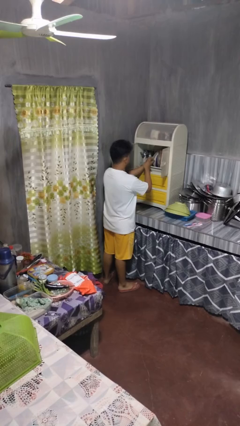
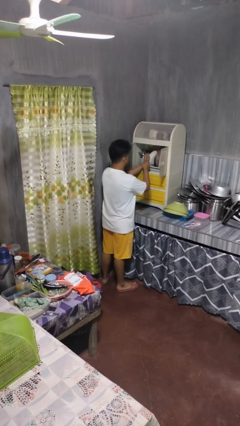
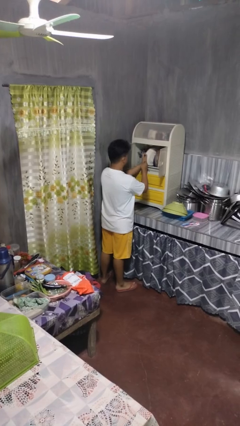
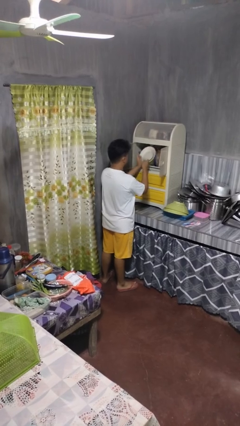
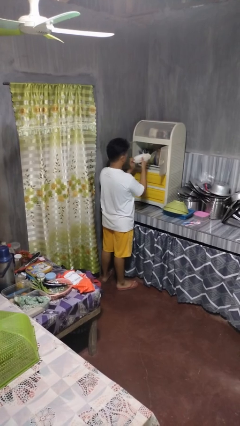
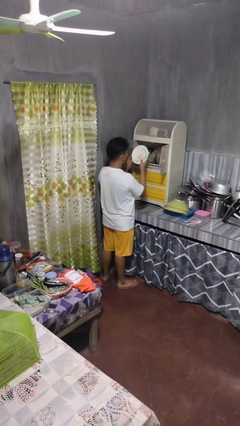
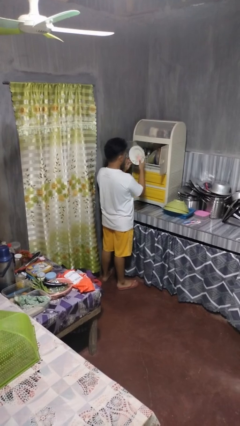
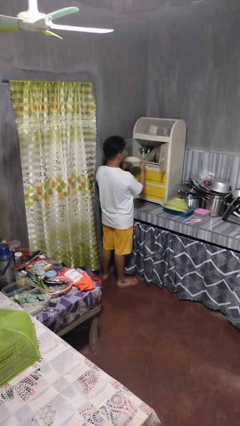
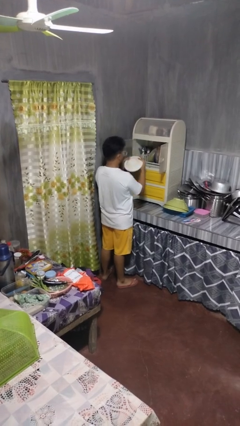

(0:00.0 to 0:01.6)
person takes object from cabinet

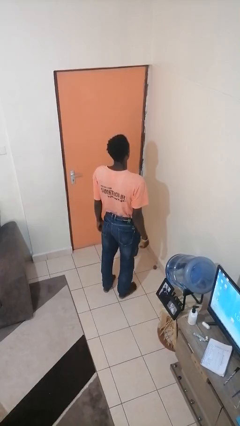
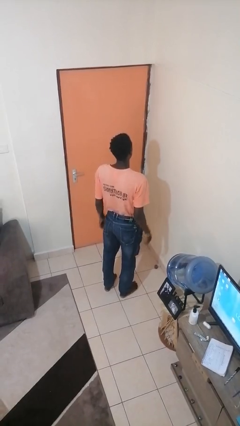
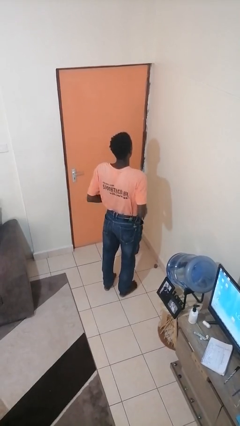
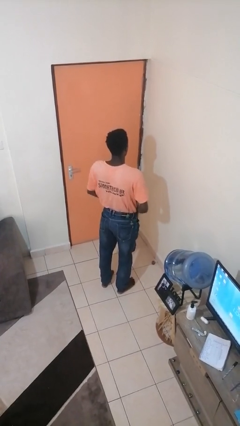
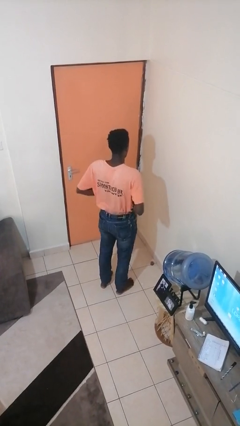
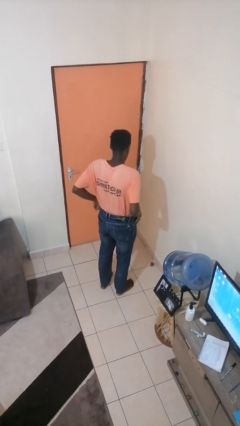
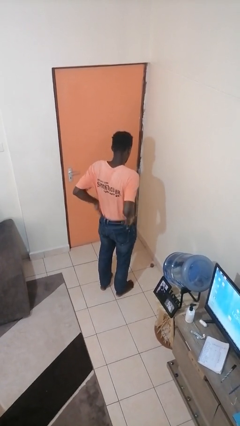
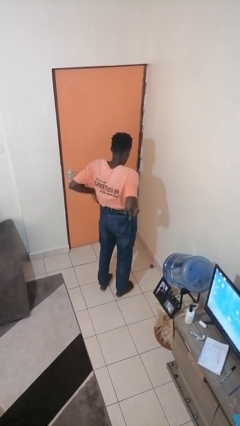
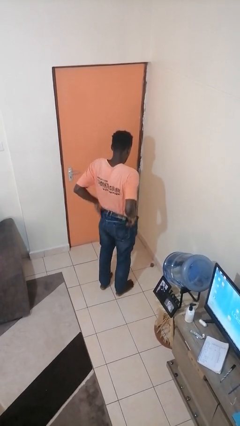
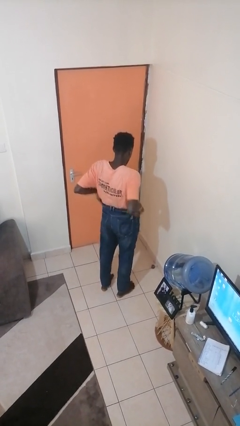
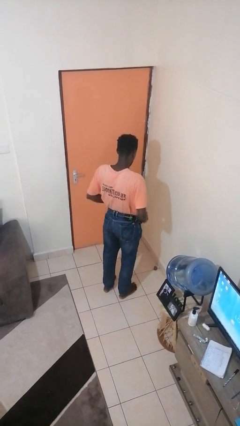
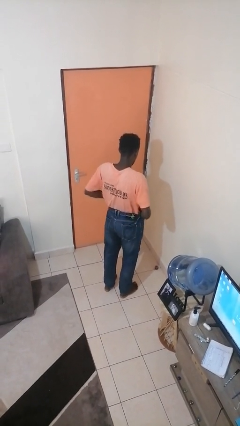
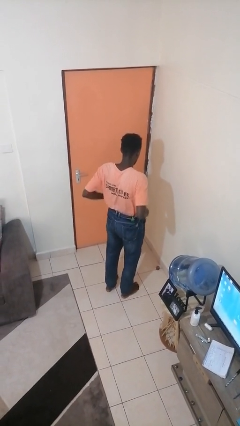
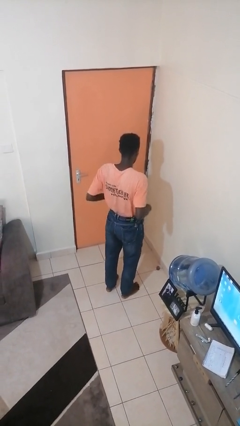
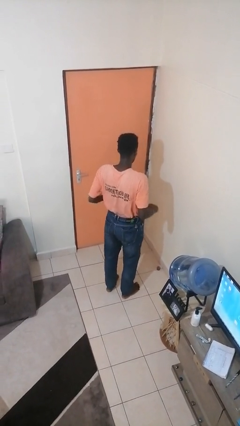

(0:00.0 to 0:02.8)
person hikes up pants

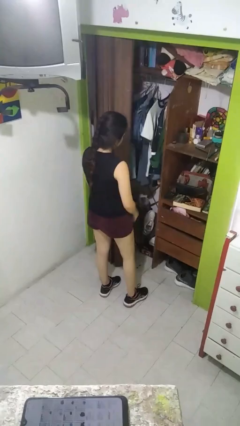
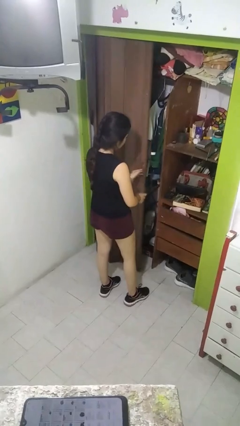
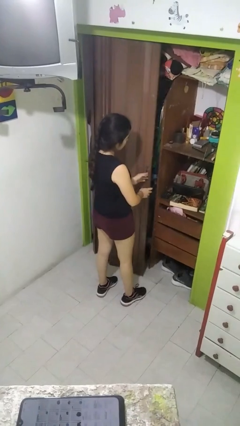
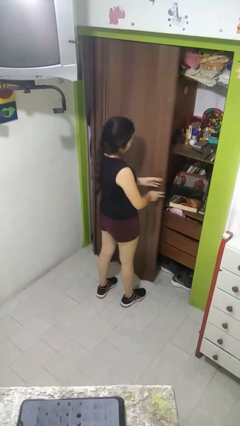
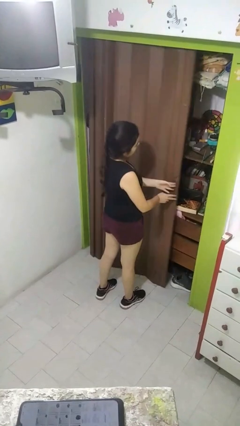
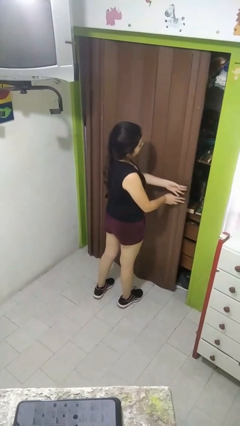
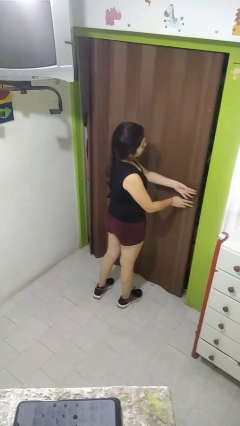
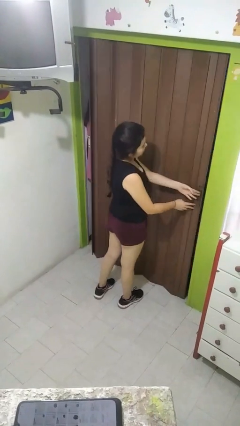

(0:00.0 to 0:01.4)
person closes closet door

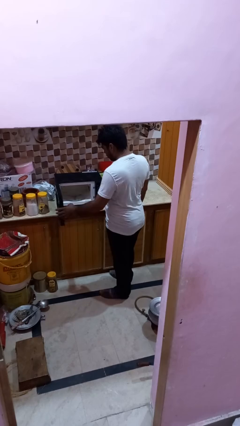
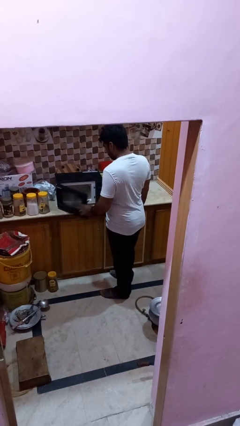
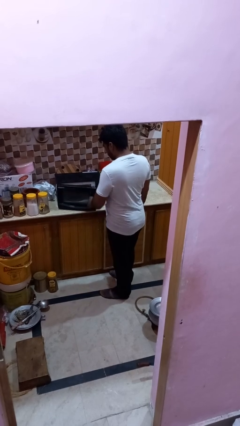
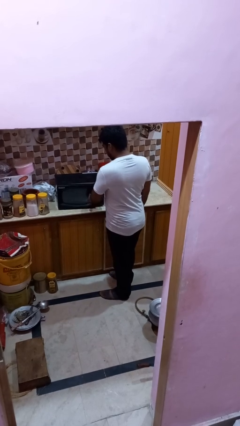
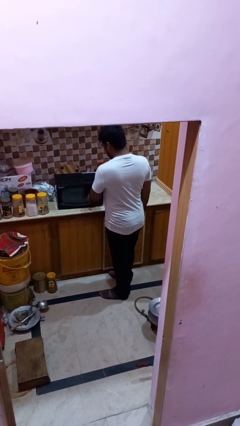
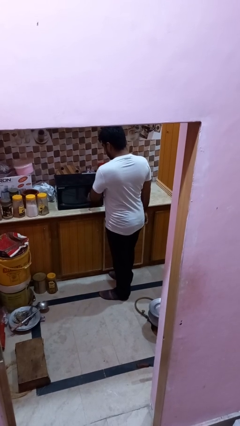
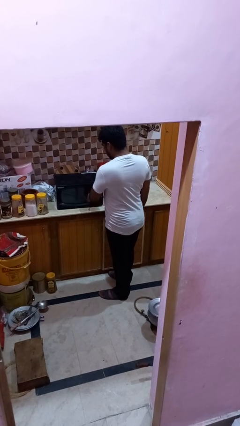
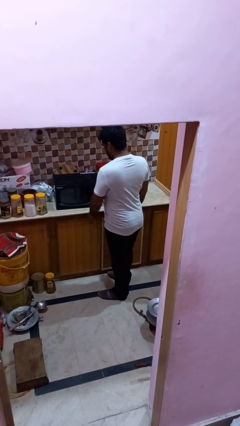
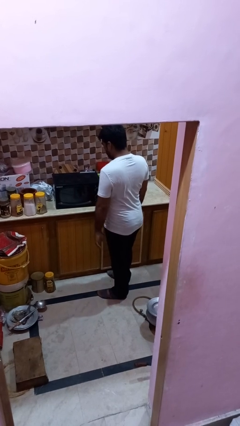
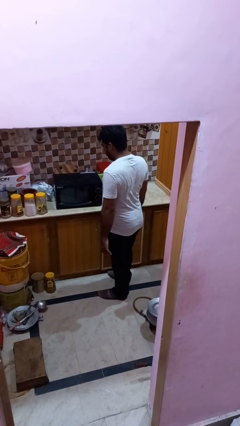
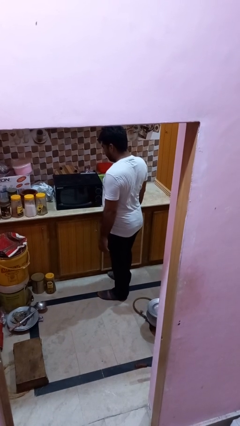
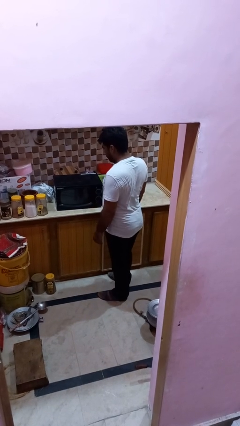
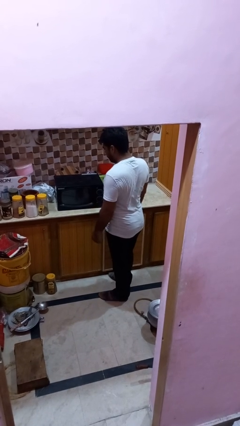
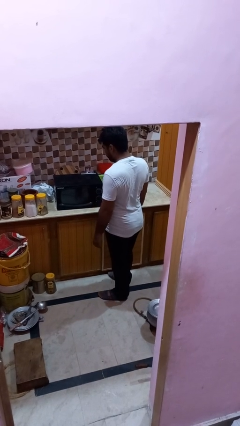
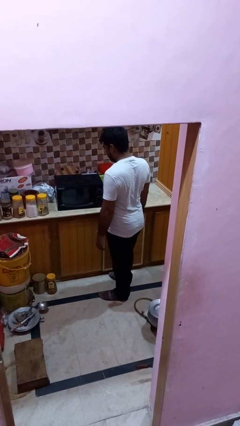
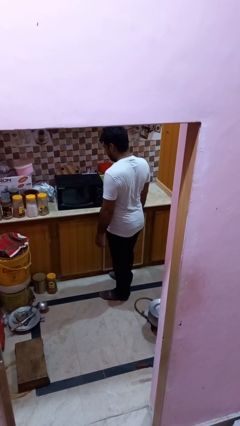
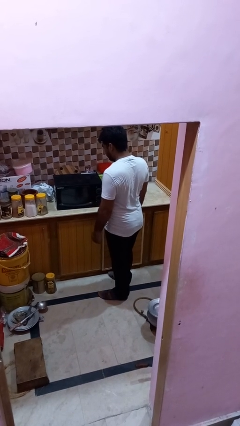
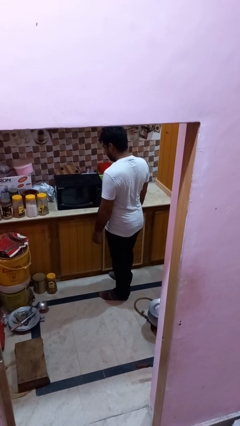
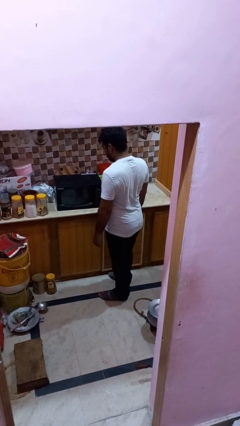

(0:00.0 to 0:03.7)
person closes oven door

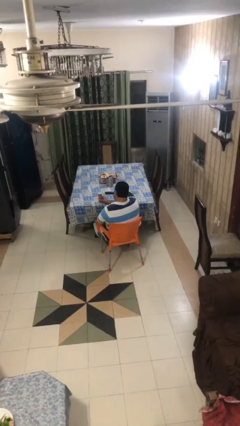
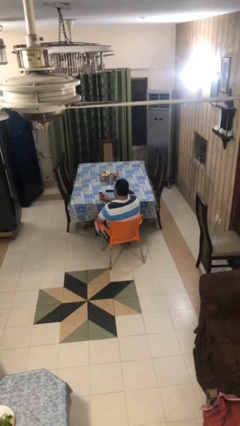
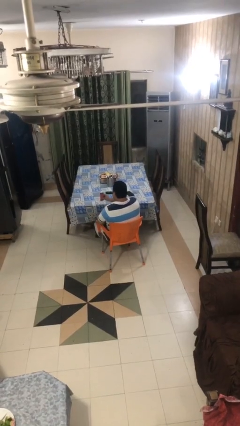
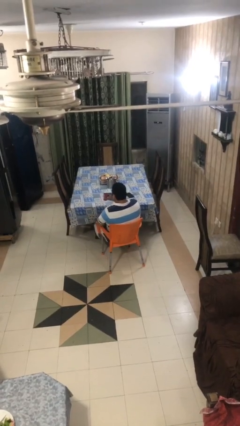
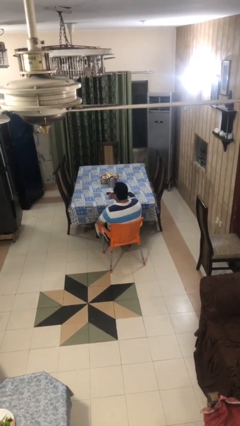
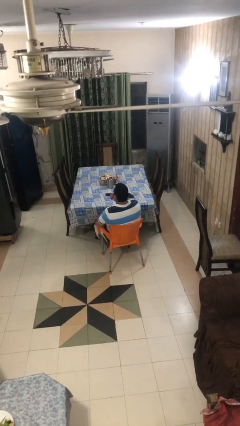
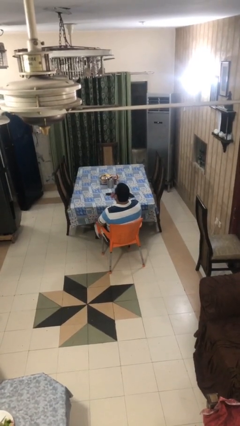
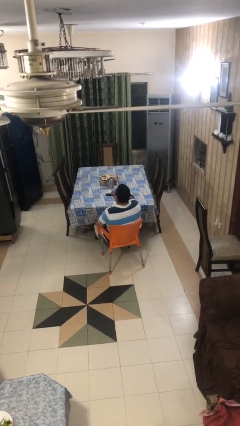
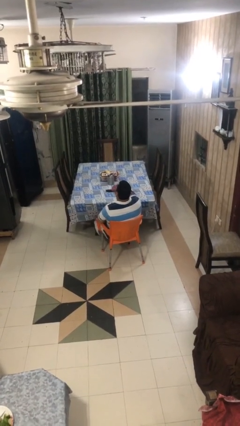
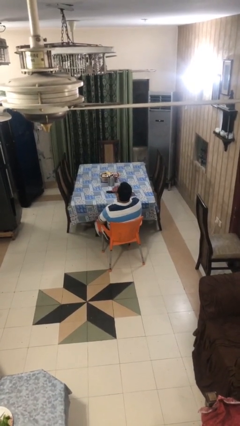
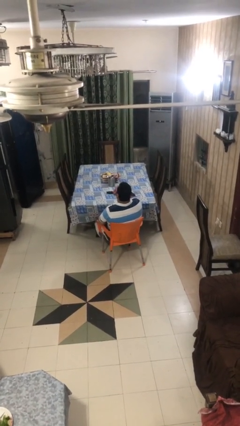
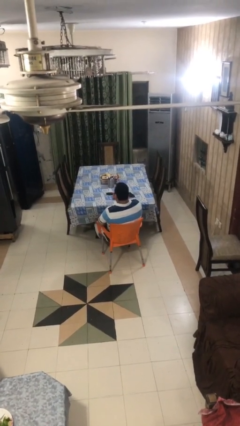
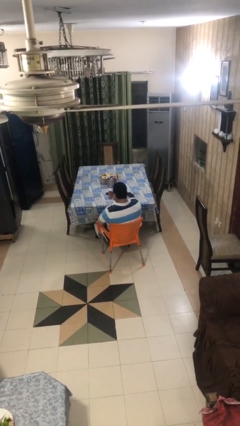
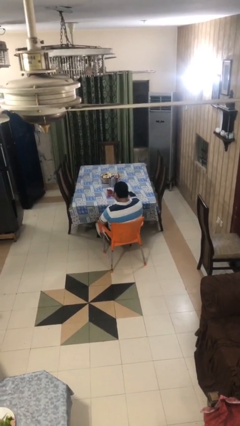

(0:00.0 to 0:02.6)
person drinks from beverage can

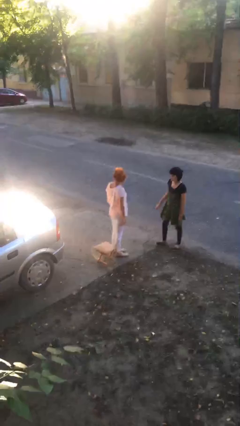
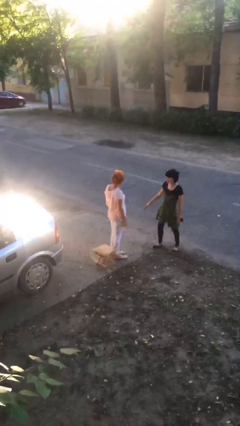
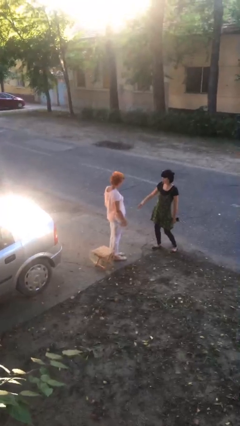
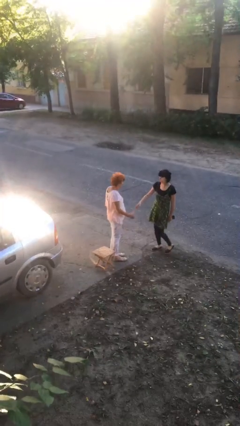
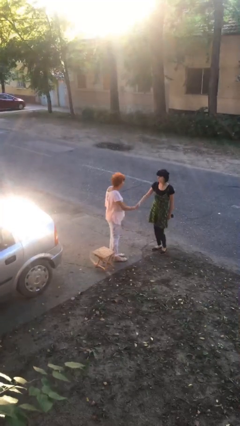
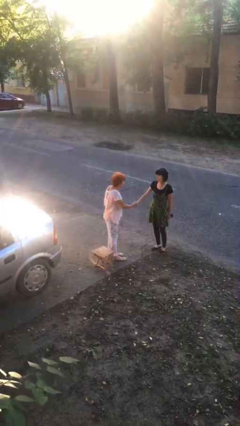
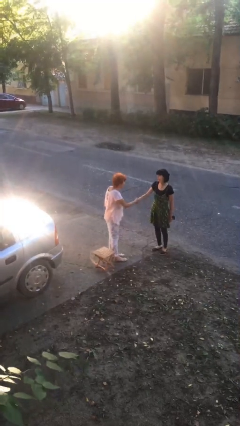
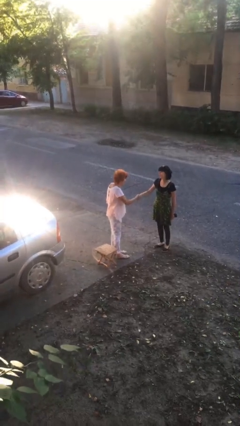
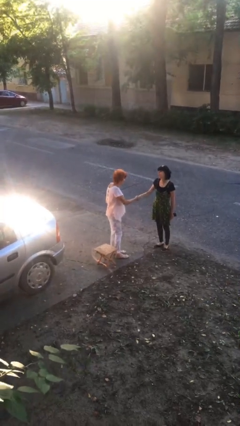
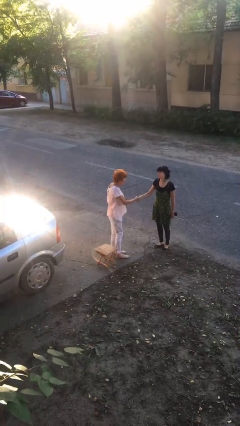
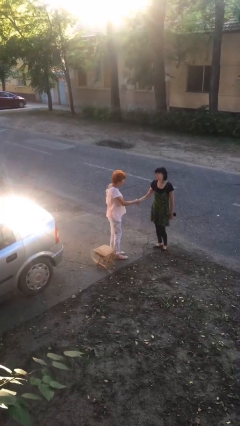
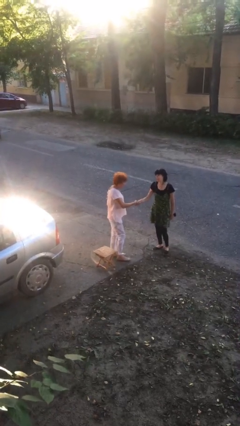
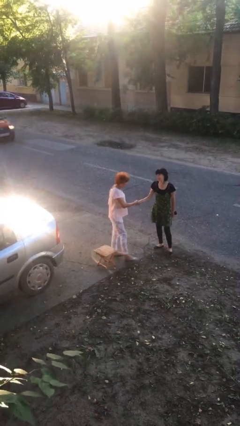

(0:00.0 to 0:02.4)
person shakes hand

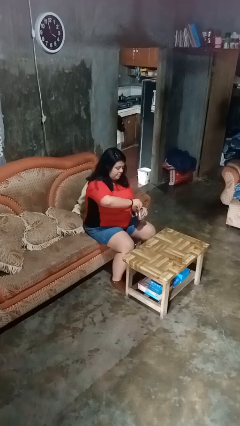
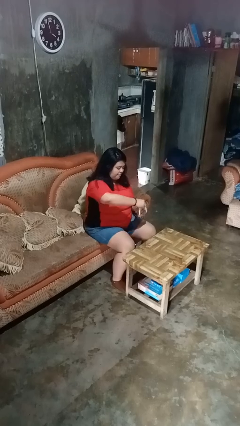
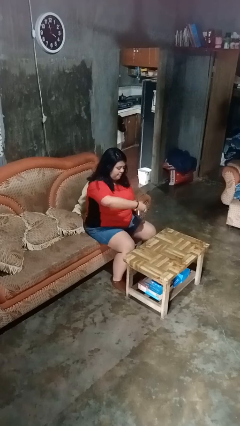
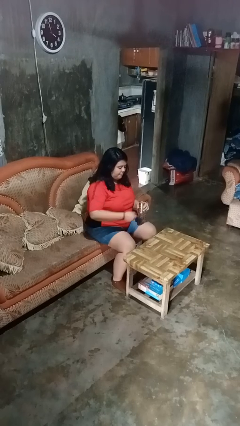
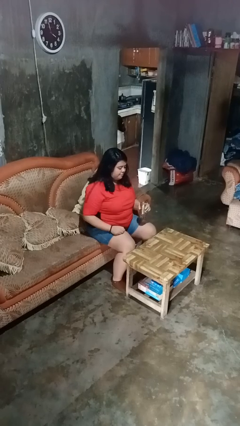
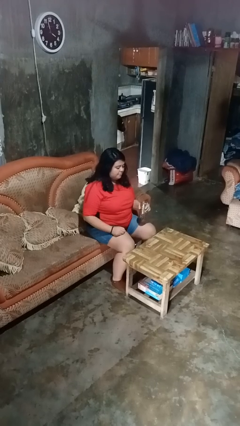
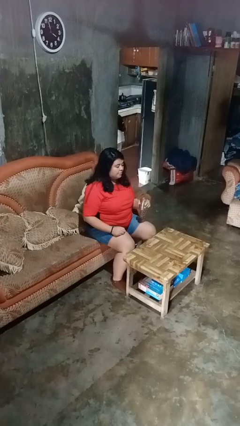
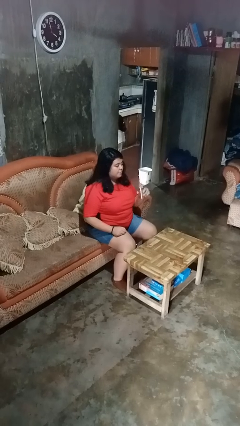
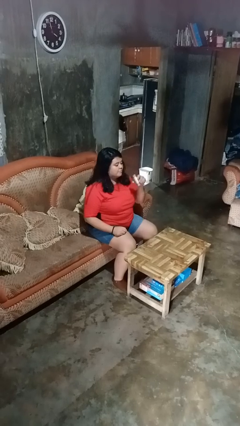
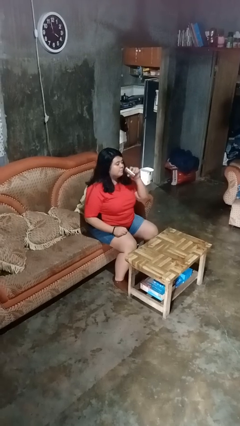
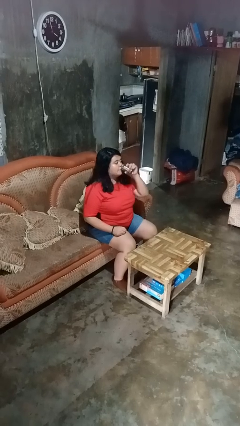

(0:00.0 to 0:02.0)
person opens beverage can

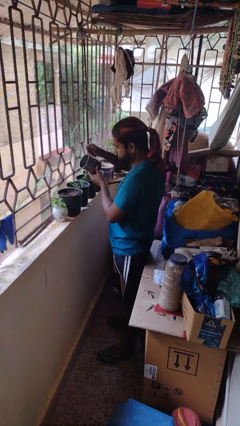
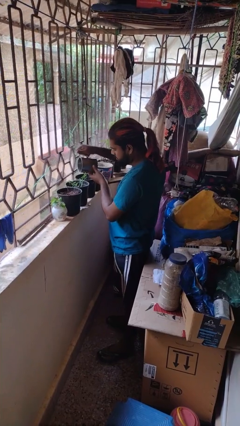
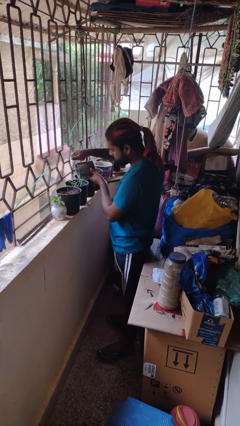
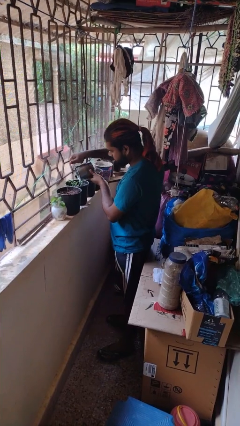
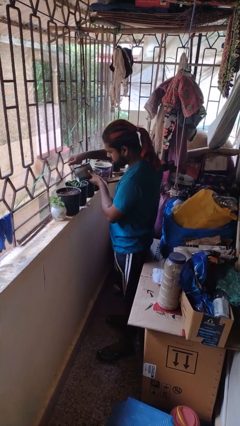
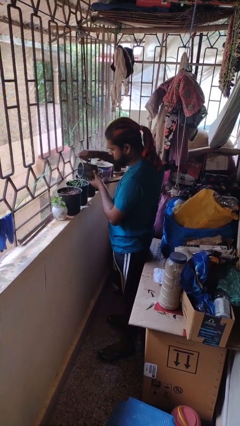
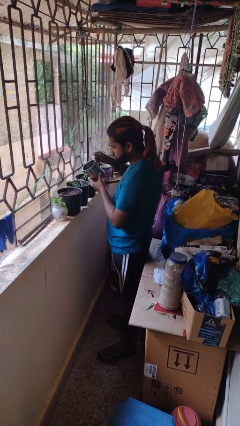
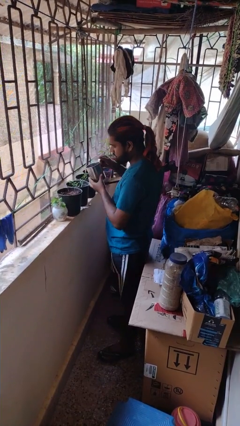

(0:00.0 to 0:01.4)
person waters houseplant
